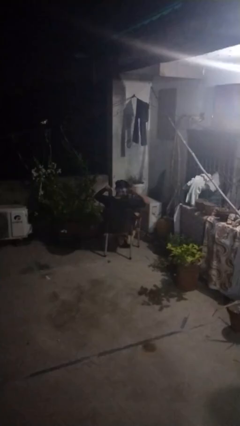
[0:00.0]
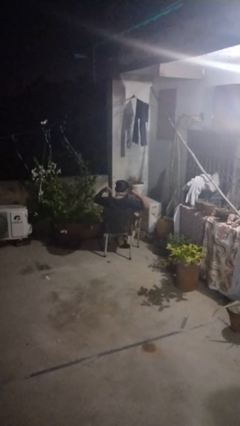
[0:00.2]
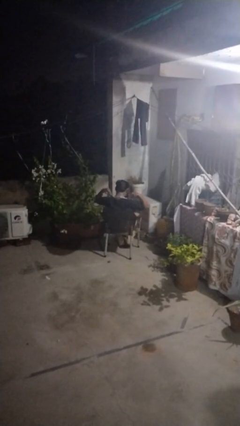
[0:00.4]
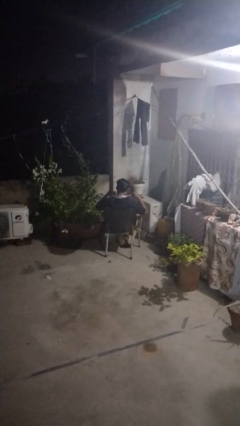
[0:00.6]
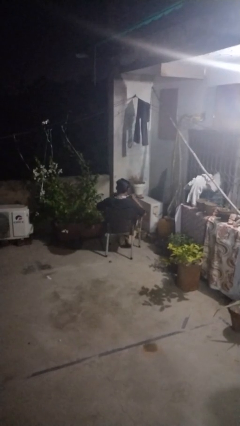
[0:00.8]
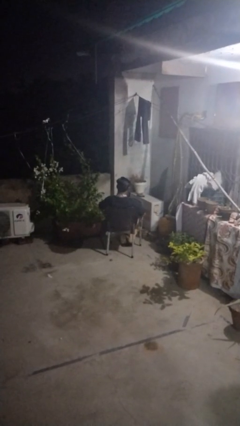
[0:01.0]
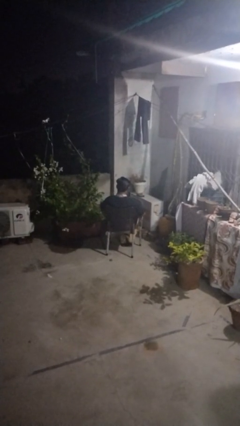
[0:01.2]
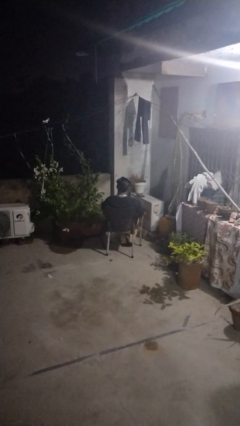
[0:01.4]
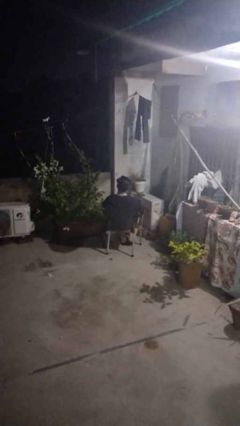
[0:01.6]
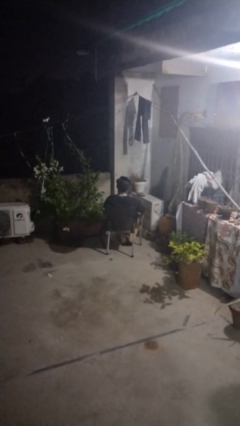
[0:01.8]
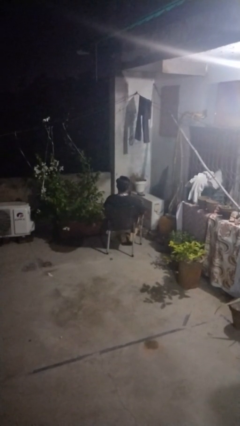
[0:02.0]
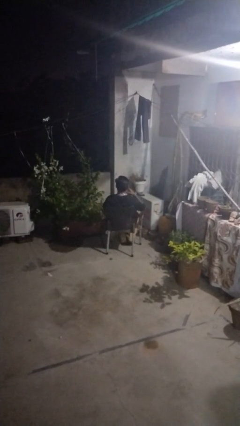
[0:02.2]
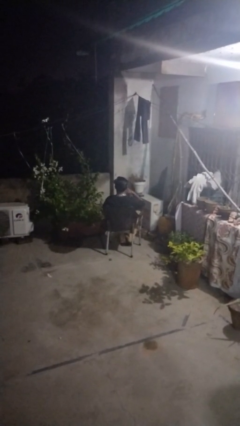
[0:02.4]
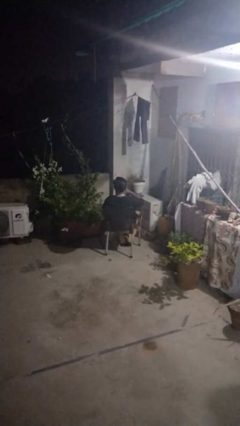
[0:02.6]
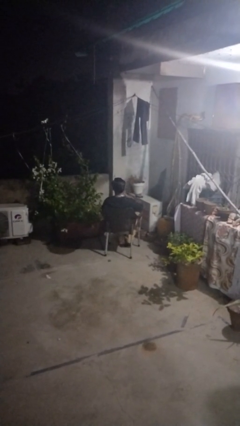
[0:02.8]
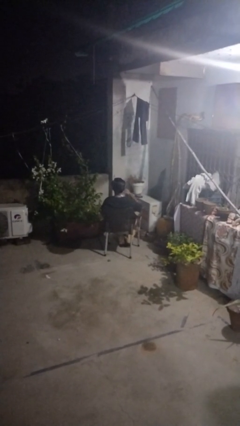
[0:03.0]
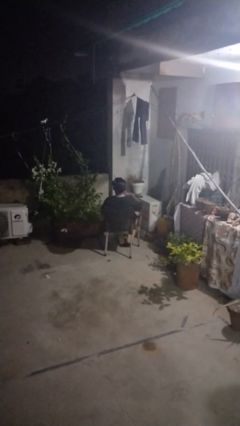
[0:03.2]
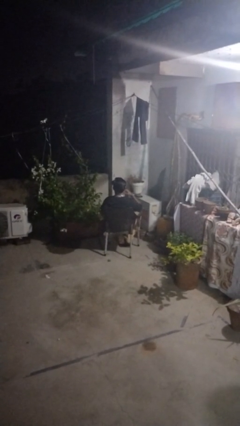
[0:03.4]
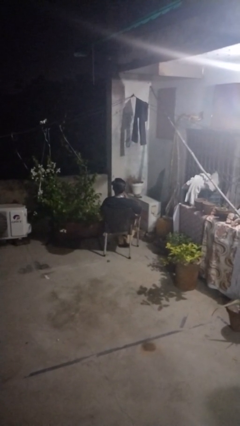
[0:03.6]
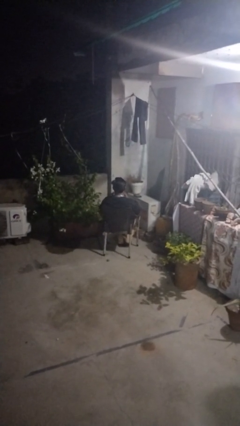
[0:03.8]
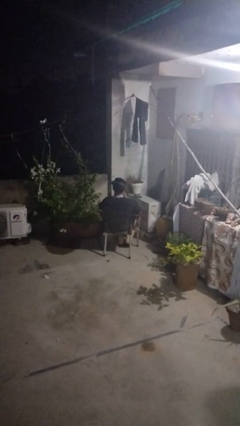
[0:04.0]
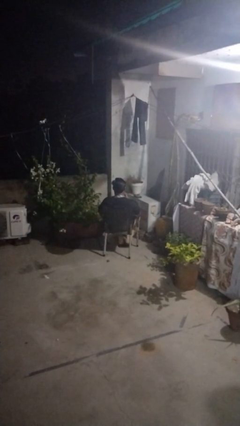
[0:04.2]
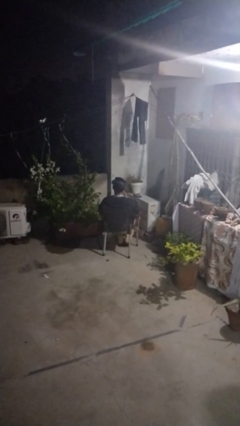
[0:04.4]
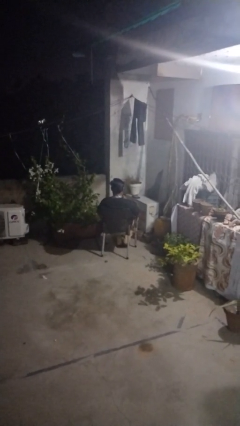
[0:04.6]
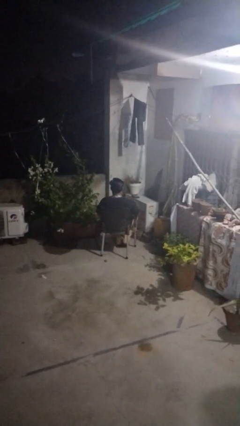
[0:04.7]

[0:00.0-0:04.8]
person puts on necktie

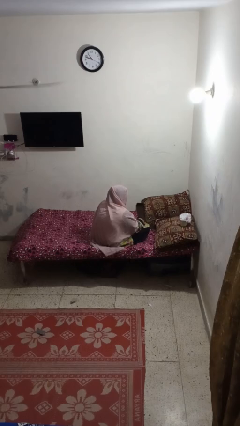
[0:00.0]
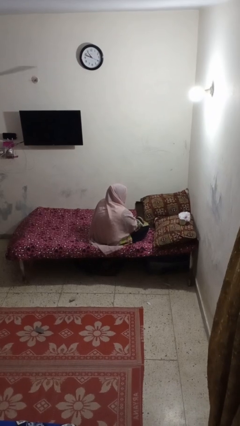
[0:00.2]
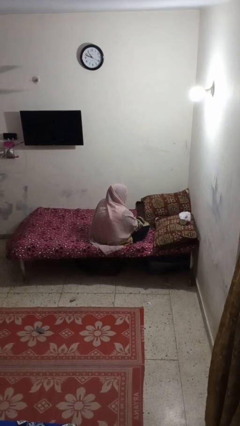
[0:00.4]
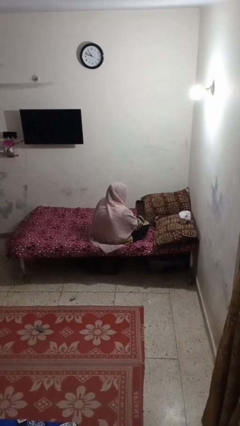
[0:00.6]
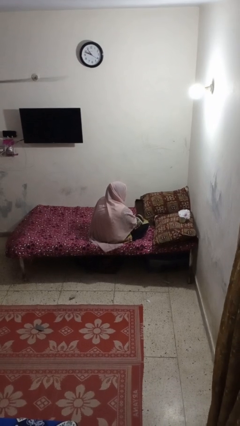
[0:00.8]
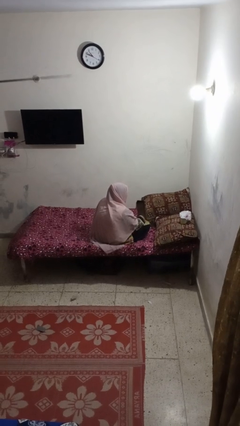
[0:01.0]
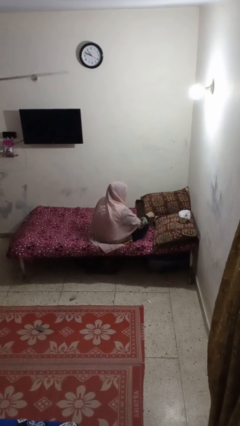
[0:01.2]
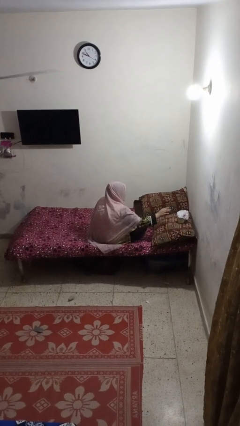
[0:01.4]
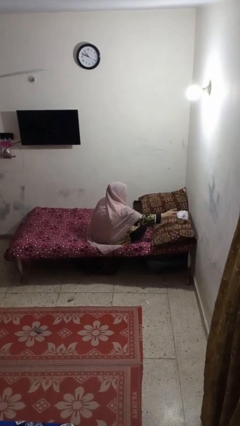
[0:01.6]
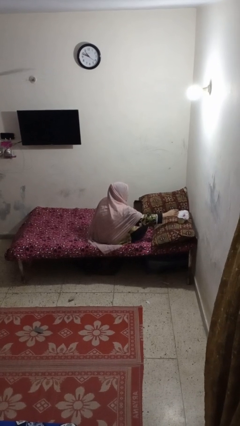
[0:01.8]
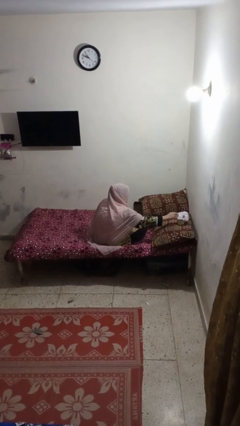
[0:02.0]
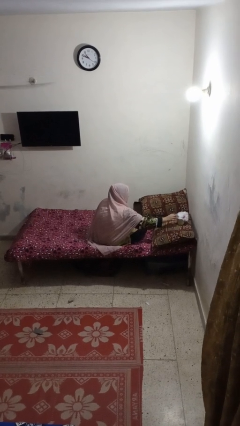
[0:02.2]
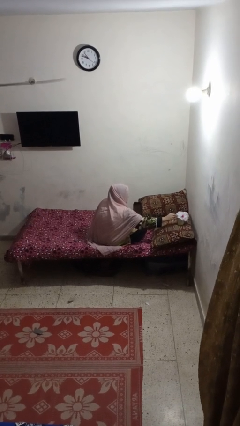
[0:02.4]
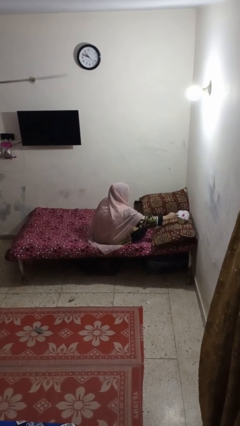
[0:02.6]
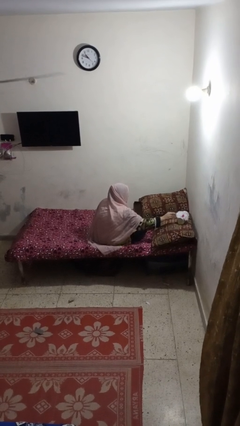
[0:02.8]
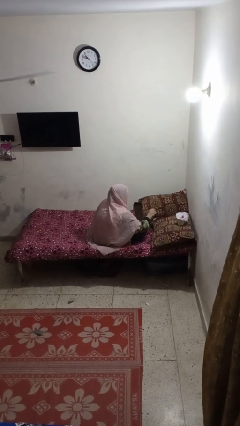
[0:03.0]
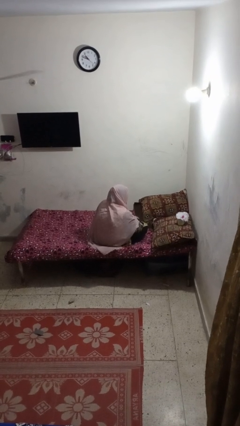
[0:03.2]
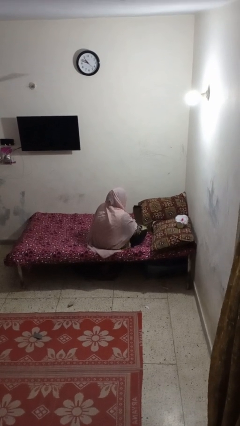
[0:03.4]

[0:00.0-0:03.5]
person arranges flowers in vase

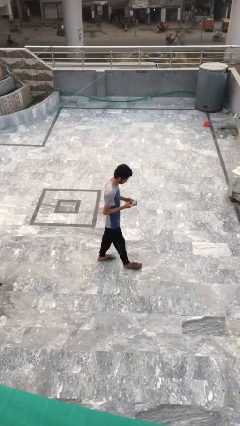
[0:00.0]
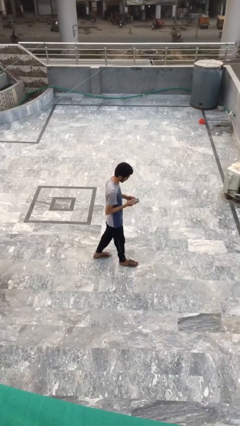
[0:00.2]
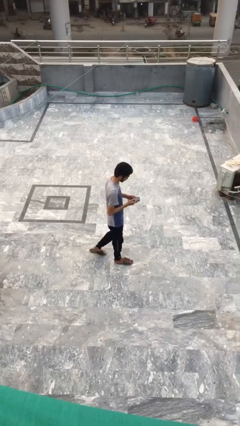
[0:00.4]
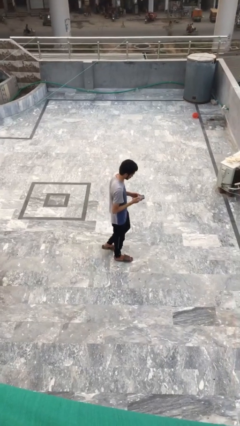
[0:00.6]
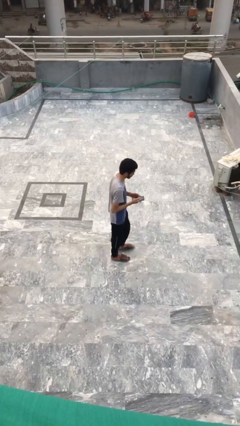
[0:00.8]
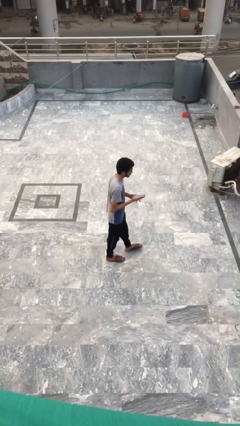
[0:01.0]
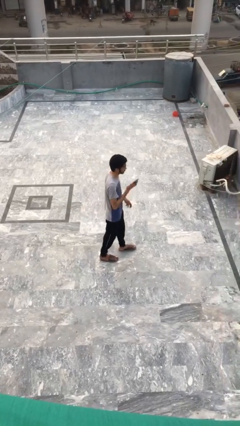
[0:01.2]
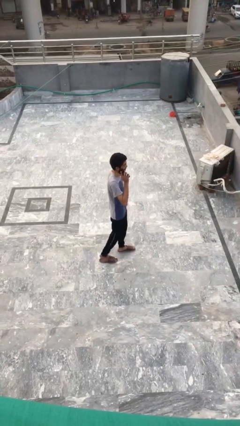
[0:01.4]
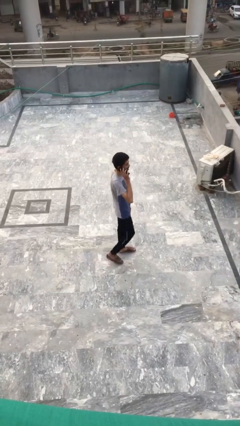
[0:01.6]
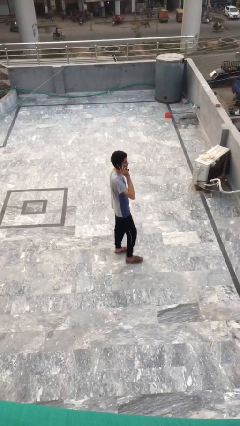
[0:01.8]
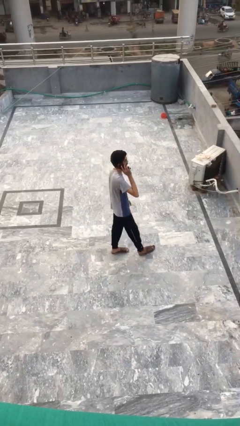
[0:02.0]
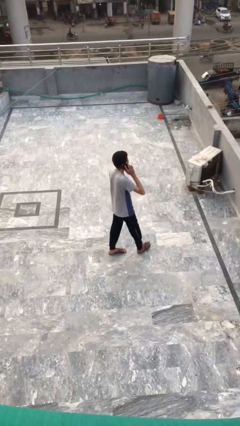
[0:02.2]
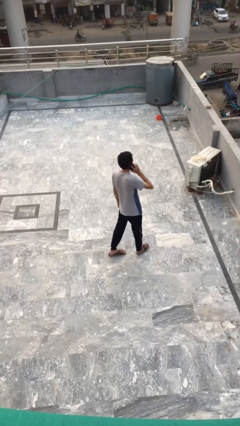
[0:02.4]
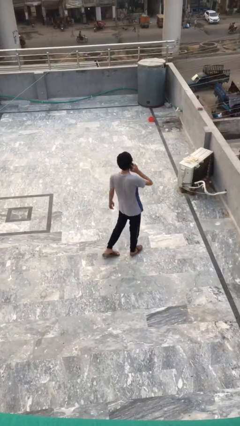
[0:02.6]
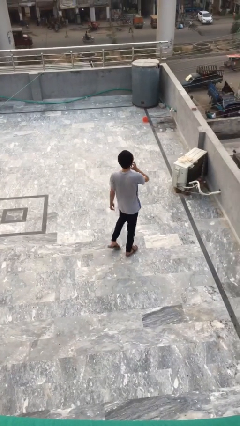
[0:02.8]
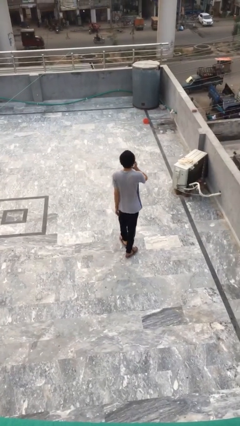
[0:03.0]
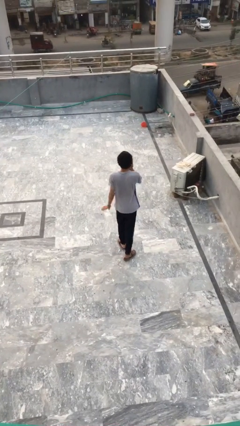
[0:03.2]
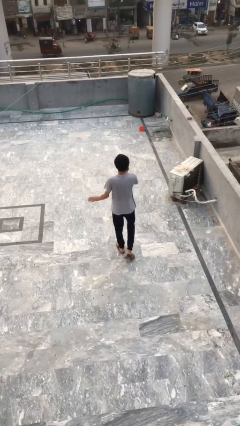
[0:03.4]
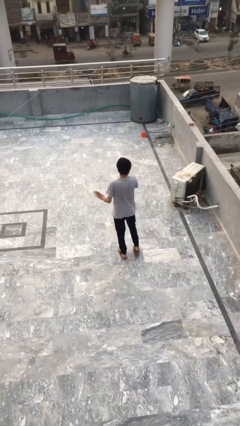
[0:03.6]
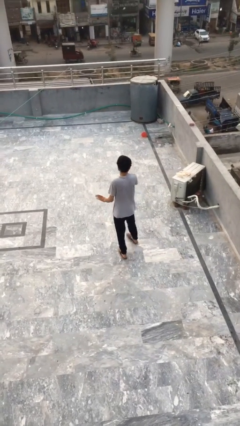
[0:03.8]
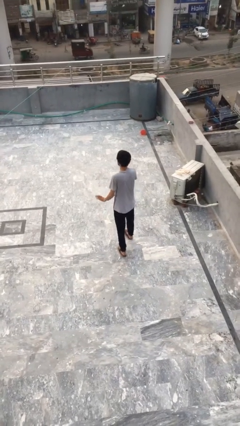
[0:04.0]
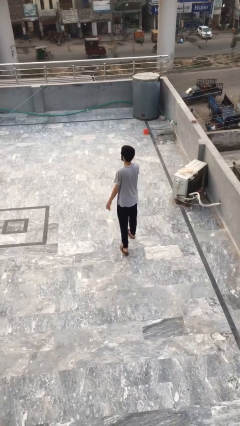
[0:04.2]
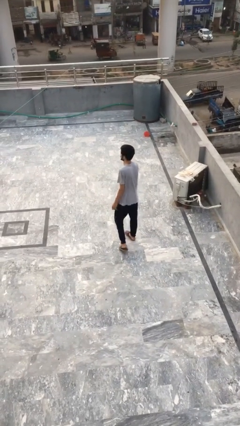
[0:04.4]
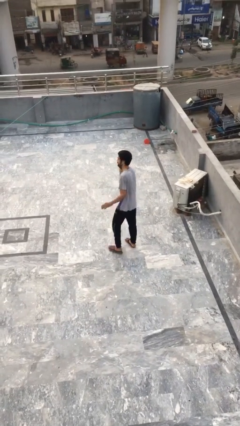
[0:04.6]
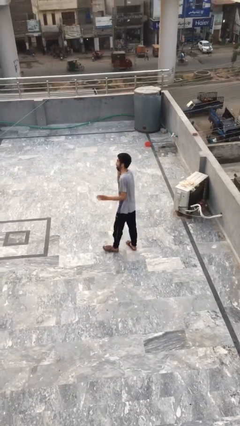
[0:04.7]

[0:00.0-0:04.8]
person talks on phone

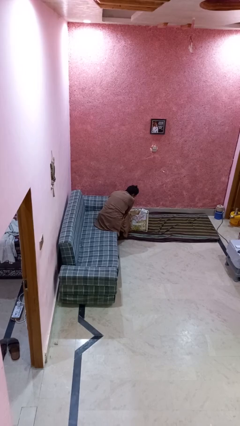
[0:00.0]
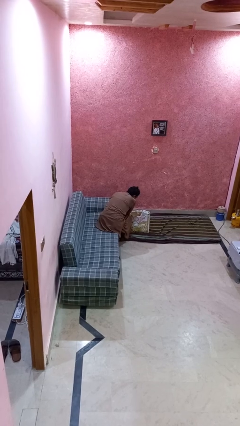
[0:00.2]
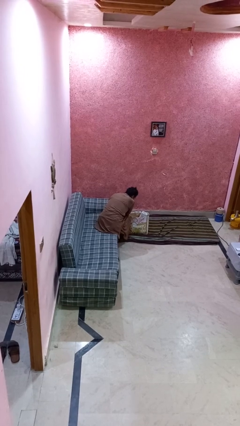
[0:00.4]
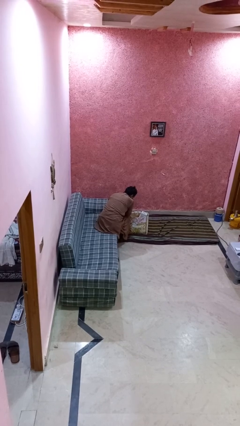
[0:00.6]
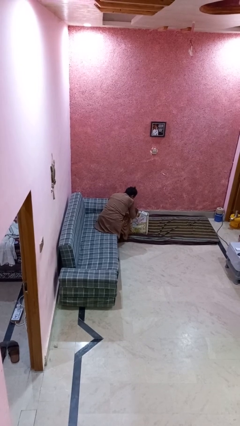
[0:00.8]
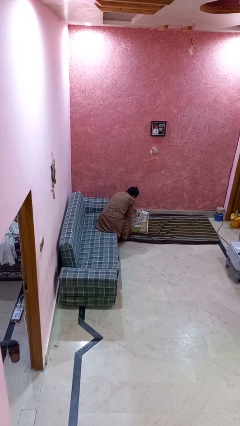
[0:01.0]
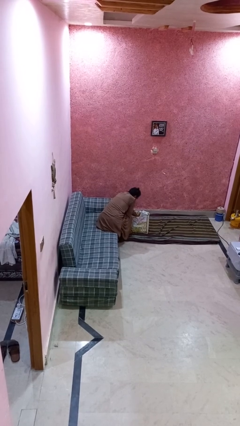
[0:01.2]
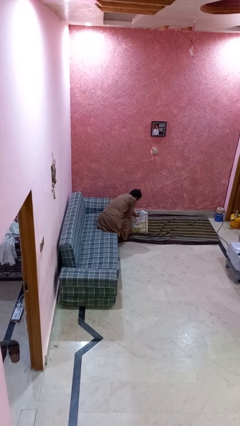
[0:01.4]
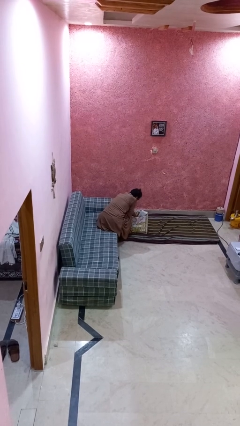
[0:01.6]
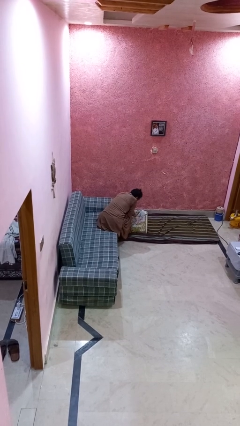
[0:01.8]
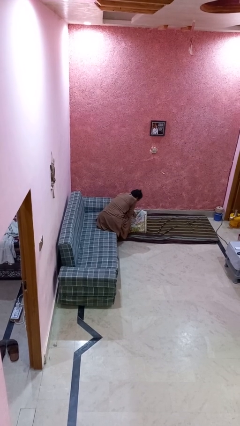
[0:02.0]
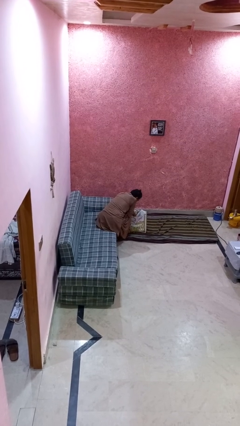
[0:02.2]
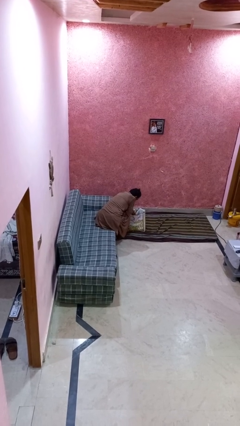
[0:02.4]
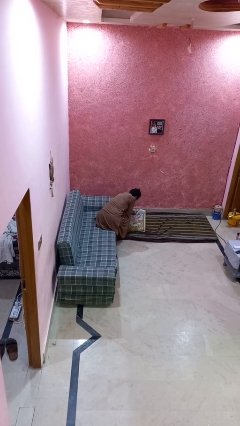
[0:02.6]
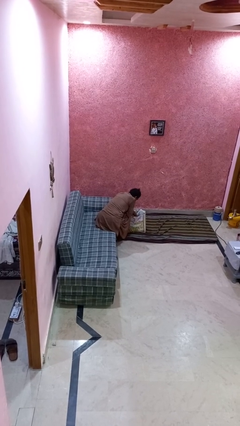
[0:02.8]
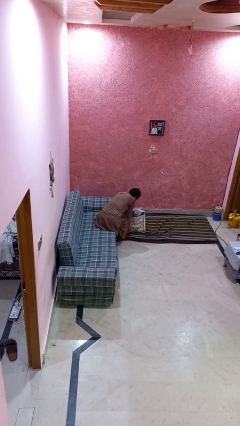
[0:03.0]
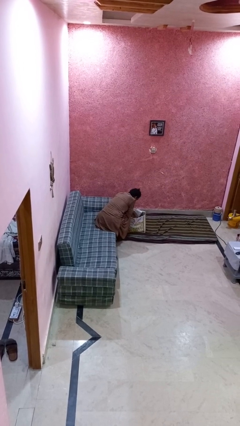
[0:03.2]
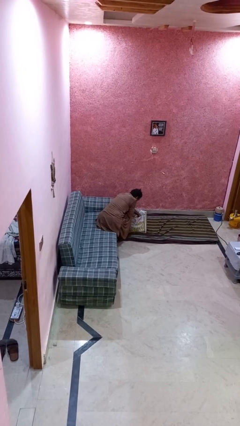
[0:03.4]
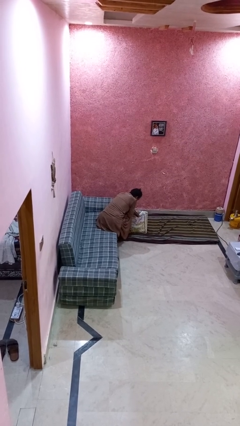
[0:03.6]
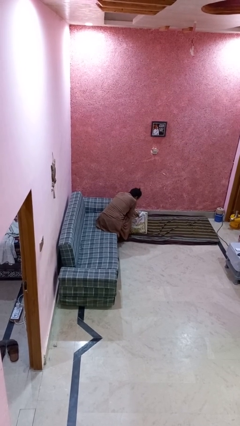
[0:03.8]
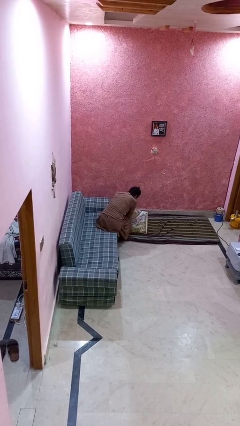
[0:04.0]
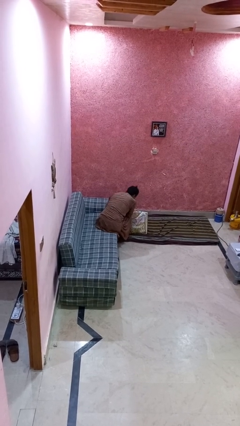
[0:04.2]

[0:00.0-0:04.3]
person searches in bag

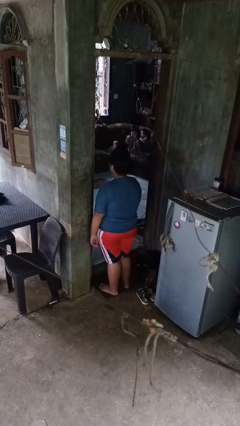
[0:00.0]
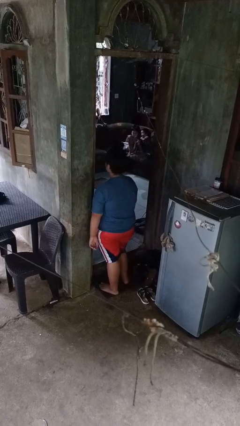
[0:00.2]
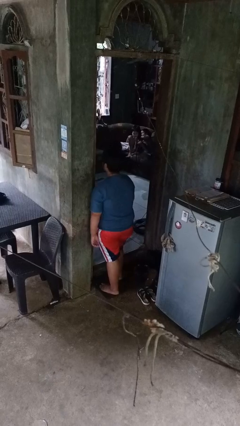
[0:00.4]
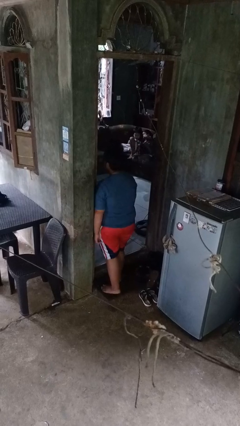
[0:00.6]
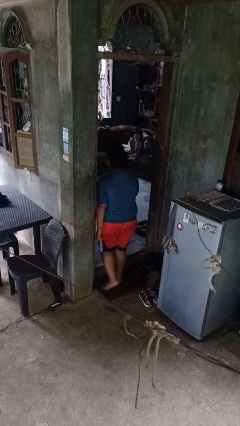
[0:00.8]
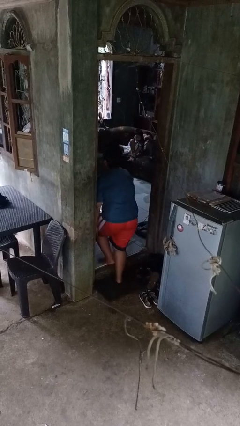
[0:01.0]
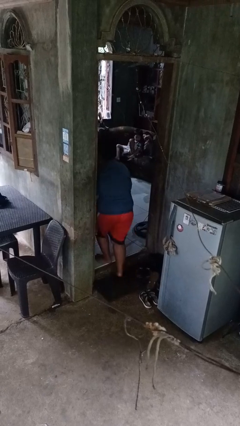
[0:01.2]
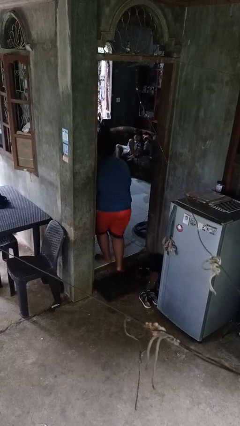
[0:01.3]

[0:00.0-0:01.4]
person bumps into wall
